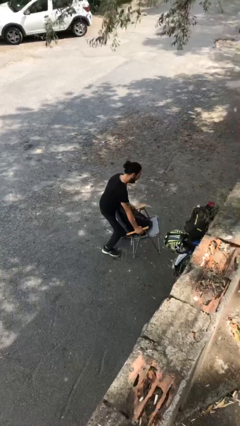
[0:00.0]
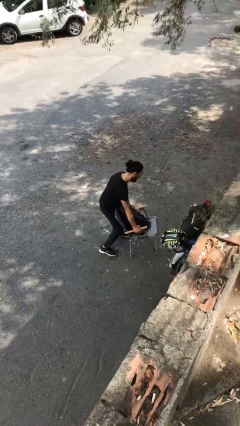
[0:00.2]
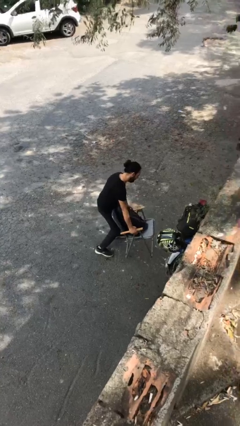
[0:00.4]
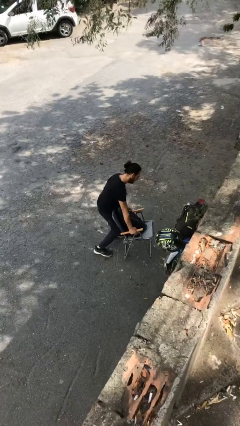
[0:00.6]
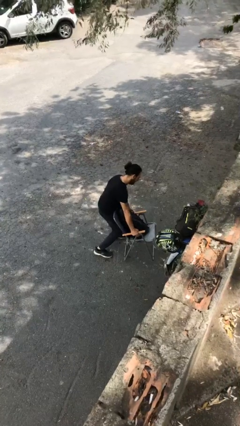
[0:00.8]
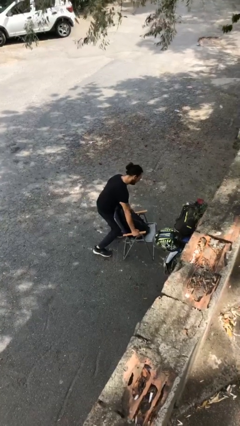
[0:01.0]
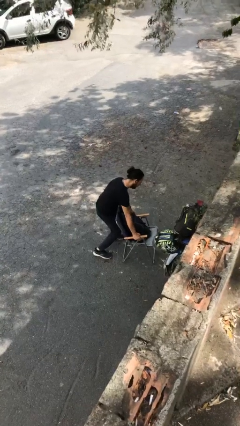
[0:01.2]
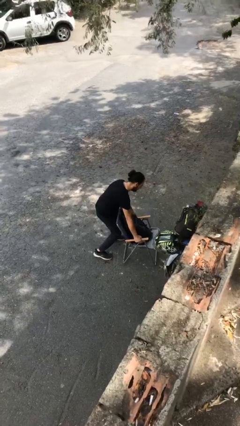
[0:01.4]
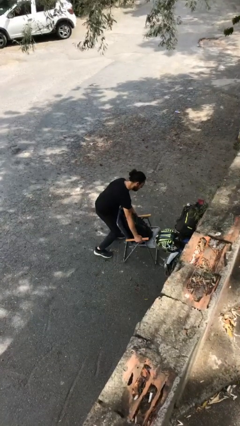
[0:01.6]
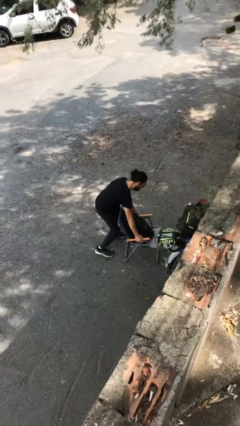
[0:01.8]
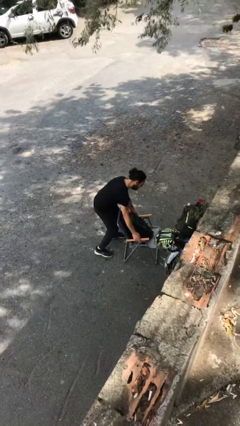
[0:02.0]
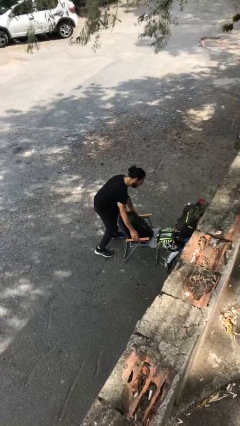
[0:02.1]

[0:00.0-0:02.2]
person puts down object on floor

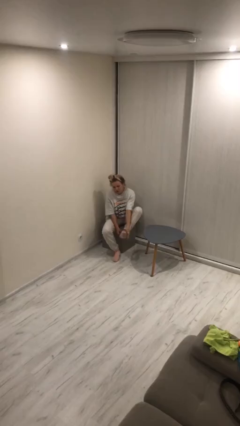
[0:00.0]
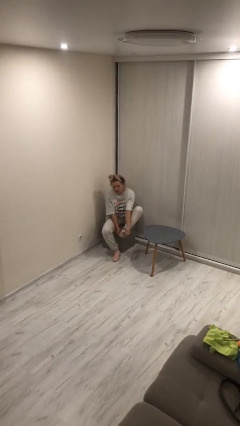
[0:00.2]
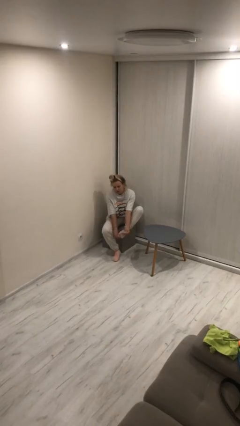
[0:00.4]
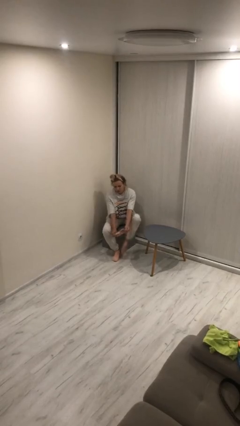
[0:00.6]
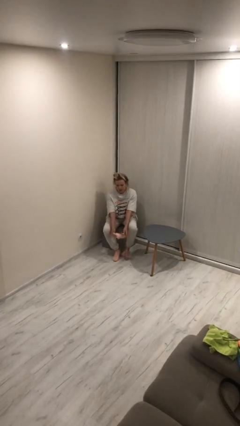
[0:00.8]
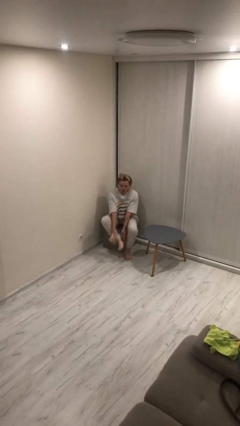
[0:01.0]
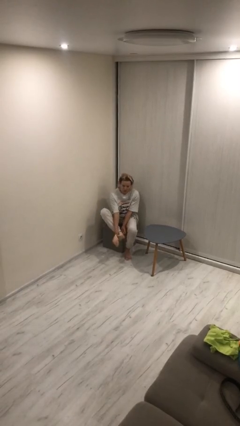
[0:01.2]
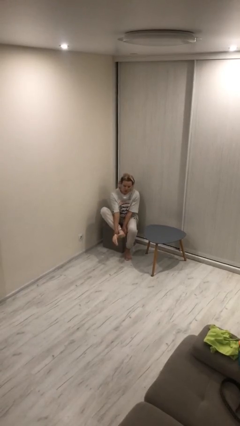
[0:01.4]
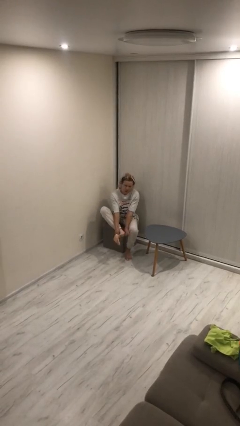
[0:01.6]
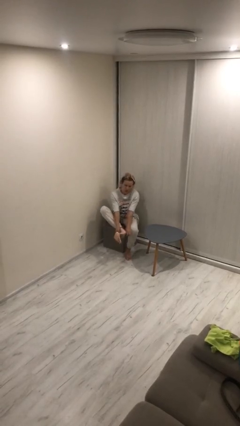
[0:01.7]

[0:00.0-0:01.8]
person takes off socks

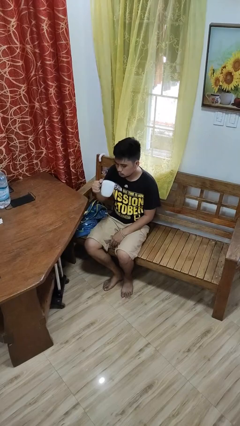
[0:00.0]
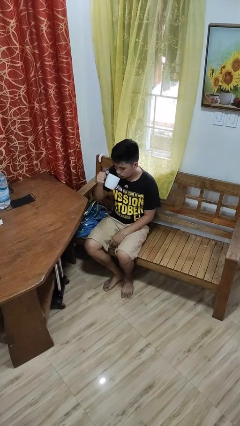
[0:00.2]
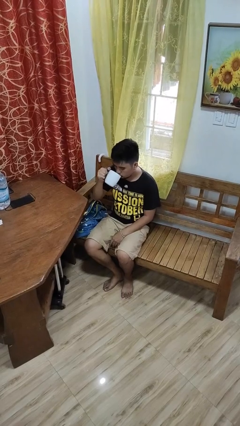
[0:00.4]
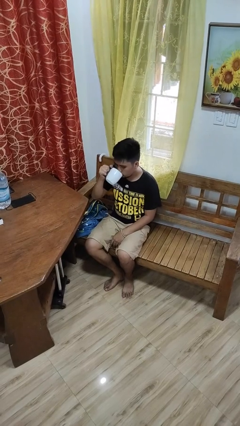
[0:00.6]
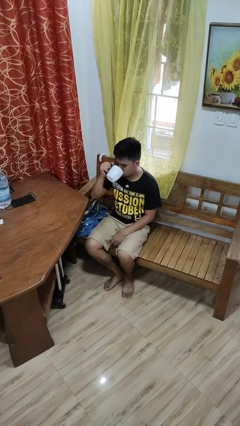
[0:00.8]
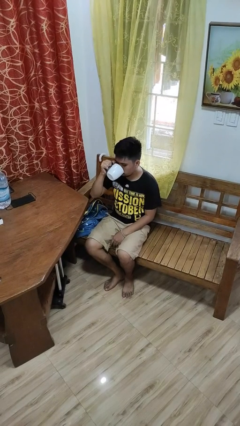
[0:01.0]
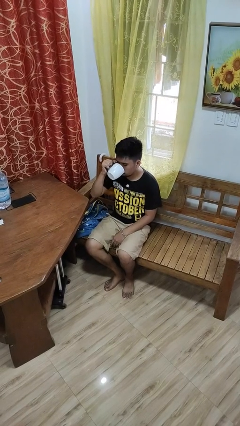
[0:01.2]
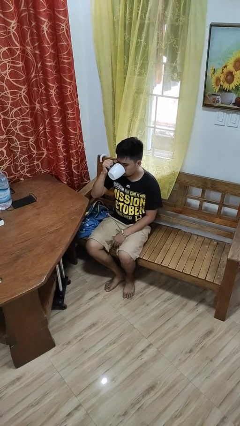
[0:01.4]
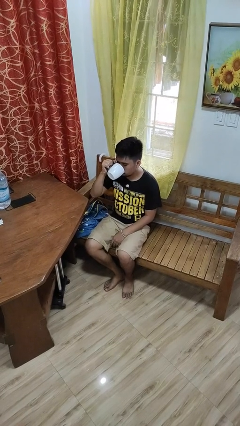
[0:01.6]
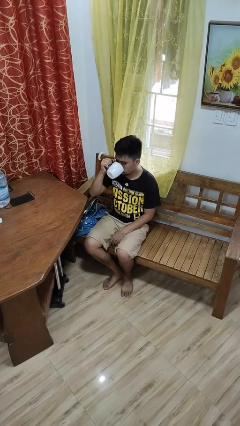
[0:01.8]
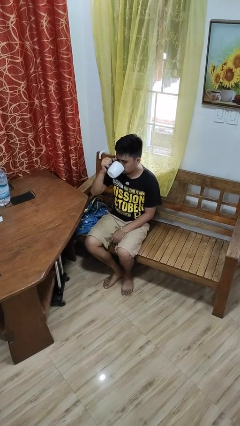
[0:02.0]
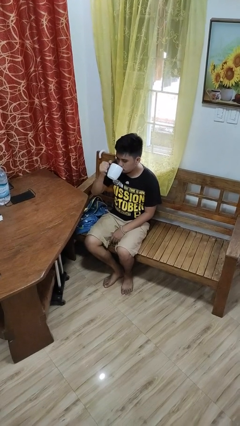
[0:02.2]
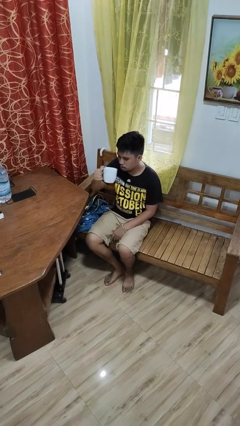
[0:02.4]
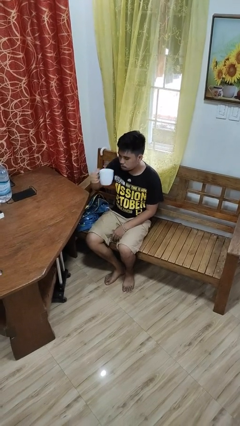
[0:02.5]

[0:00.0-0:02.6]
person drinks from mug

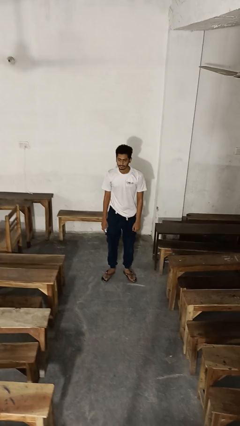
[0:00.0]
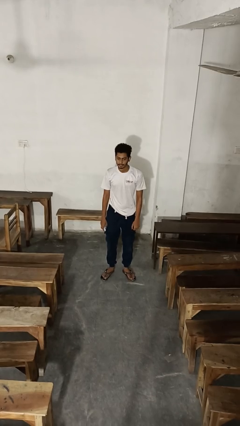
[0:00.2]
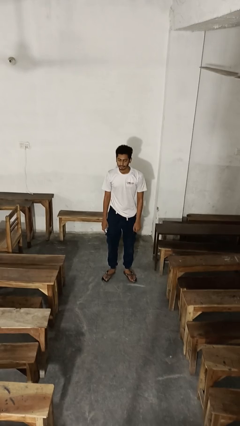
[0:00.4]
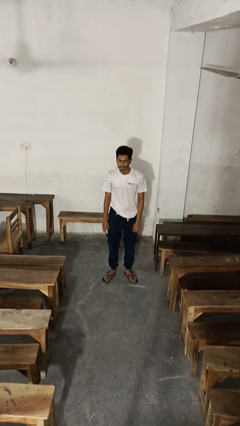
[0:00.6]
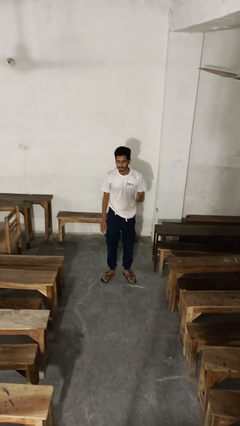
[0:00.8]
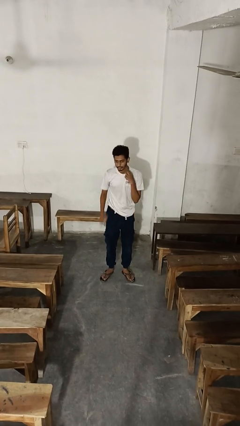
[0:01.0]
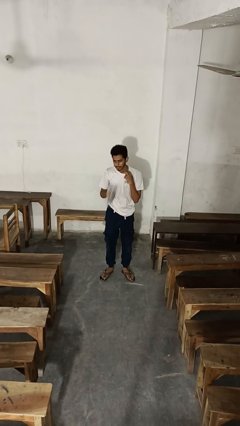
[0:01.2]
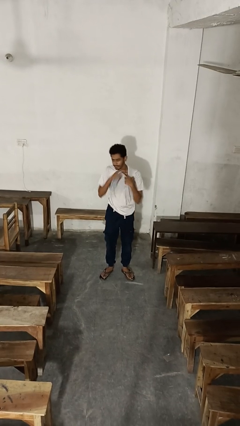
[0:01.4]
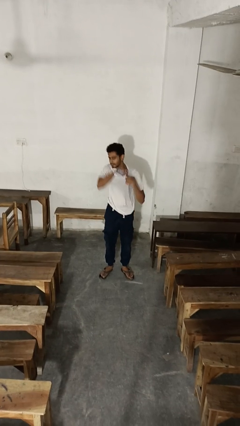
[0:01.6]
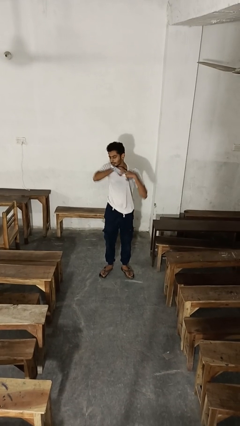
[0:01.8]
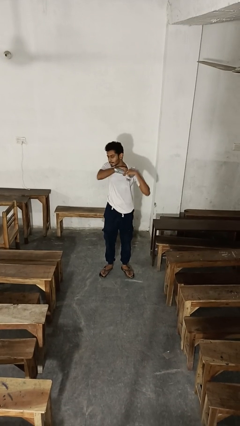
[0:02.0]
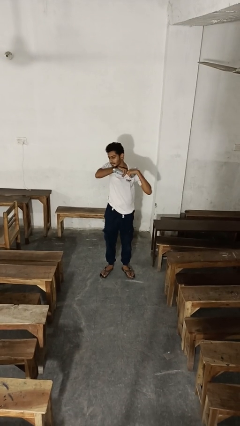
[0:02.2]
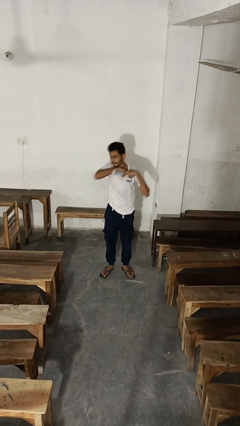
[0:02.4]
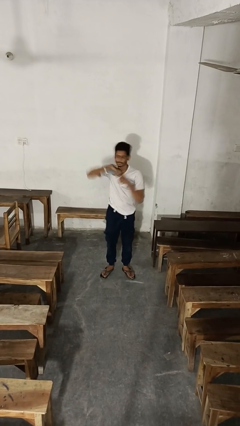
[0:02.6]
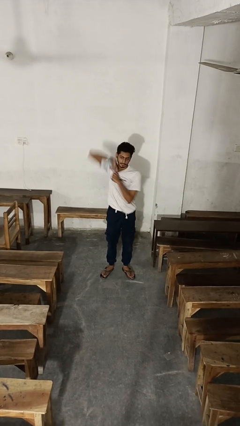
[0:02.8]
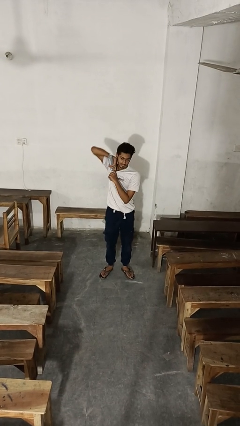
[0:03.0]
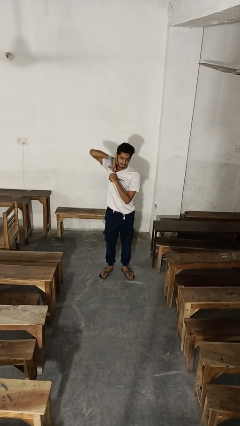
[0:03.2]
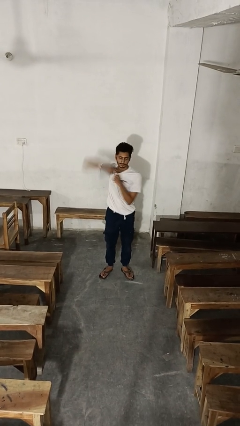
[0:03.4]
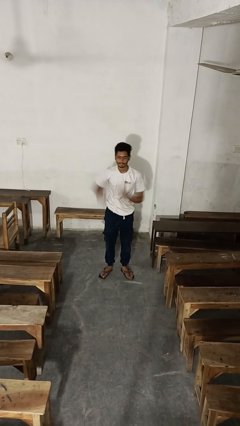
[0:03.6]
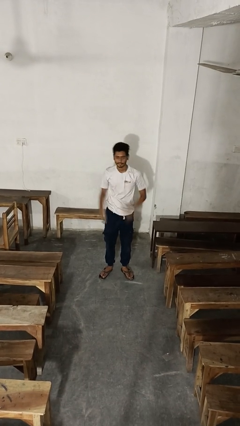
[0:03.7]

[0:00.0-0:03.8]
person applies deodorant

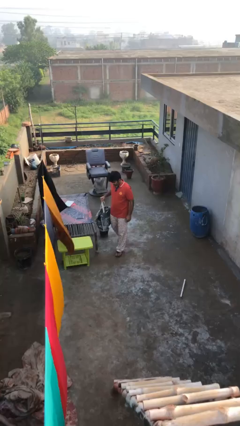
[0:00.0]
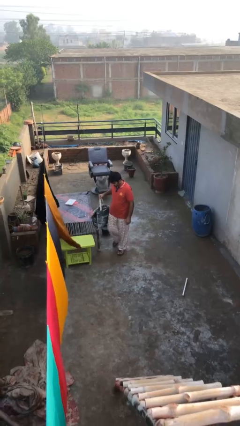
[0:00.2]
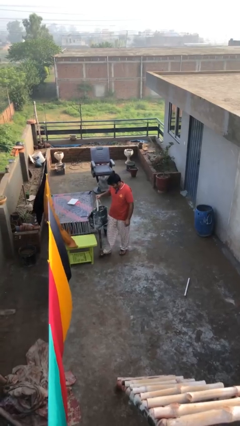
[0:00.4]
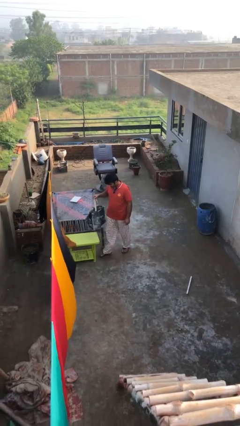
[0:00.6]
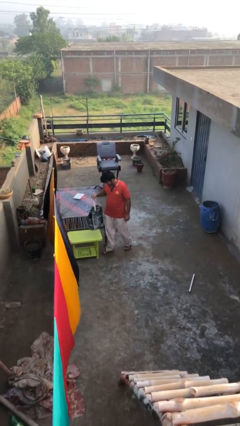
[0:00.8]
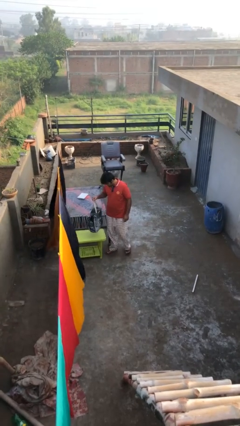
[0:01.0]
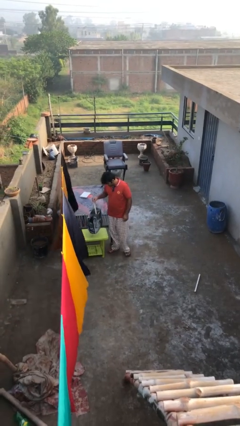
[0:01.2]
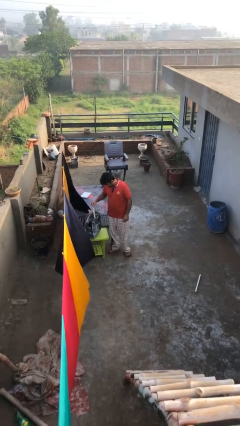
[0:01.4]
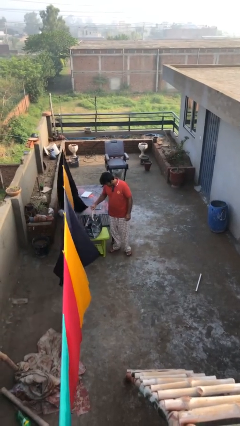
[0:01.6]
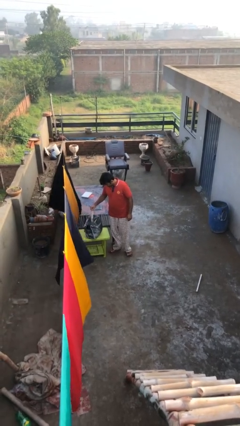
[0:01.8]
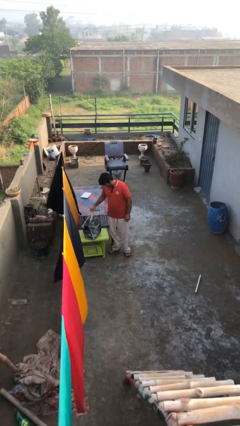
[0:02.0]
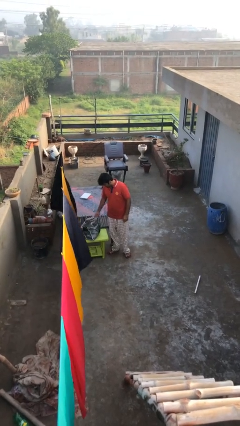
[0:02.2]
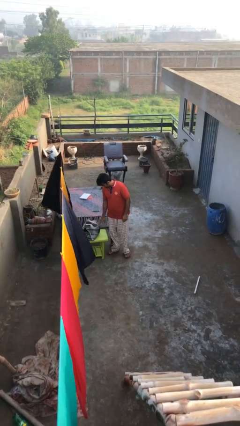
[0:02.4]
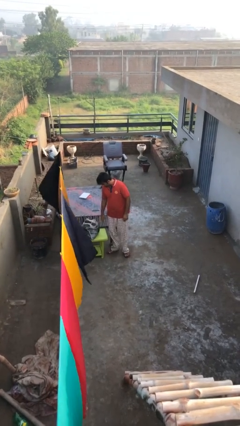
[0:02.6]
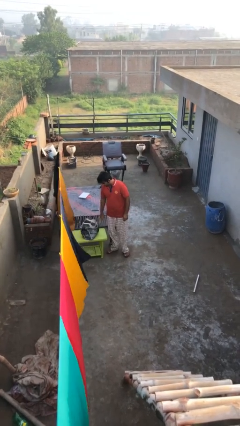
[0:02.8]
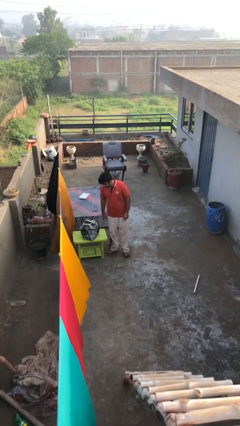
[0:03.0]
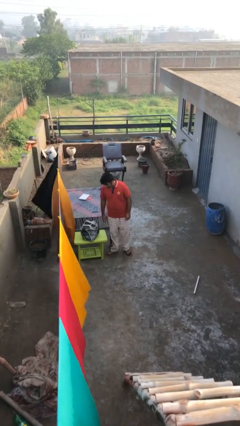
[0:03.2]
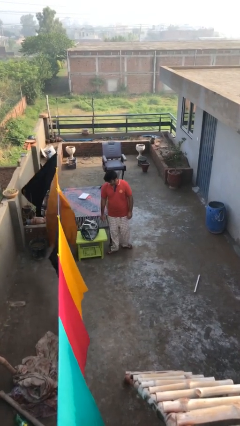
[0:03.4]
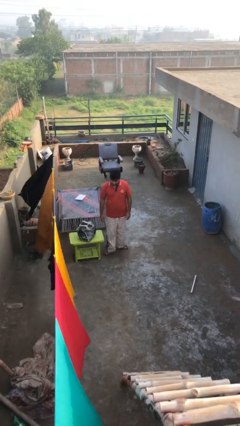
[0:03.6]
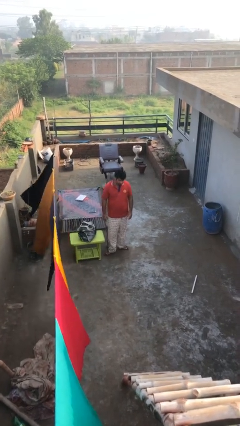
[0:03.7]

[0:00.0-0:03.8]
person puts down object on table
